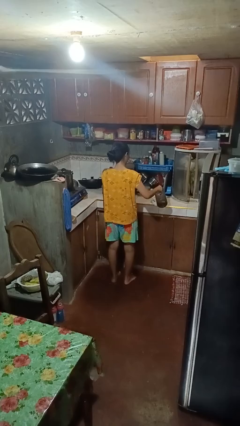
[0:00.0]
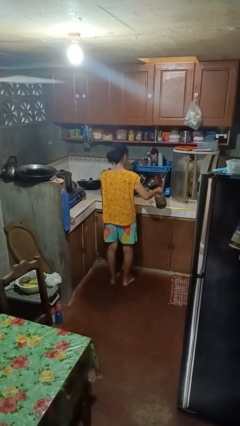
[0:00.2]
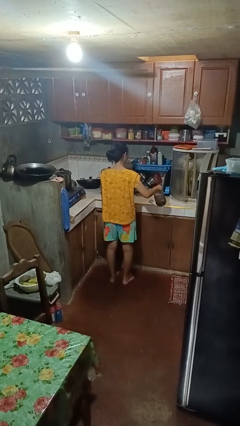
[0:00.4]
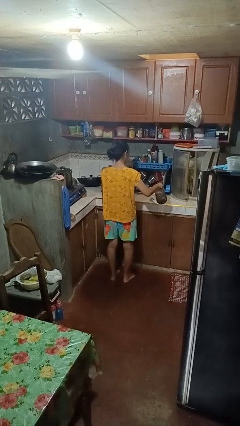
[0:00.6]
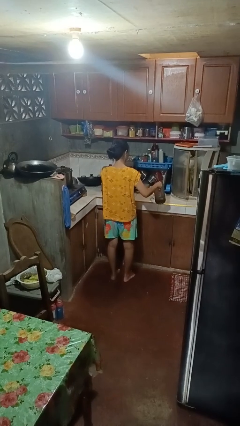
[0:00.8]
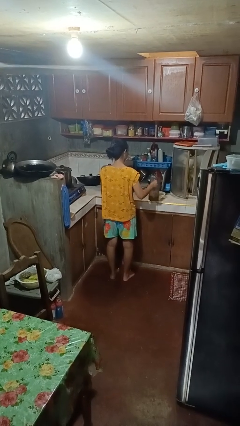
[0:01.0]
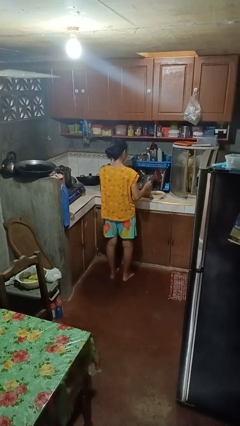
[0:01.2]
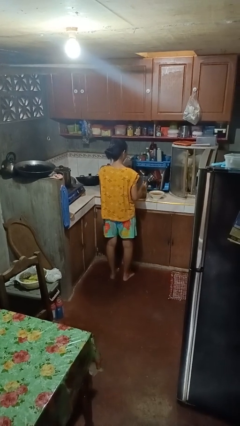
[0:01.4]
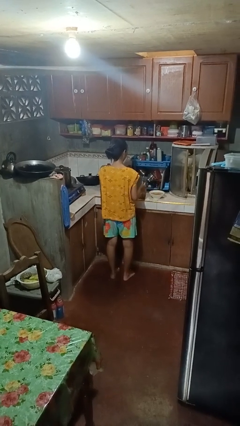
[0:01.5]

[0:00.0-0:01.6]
person pours into bowl

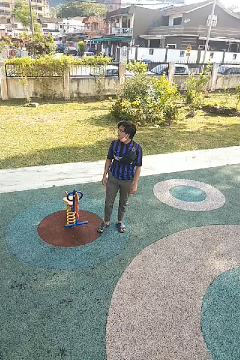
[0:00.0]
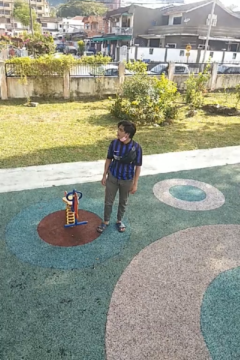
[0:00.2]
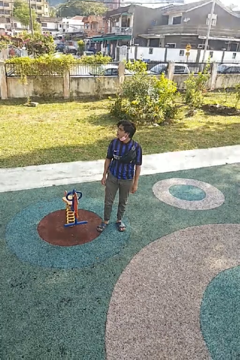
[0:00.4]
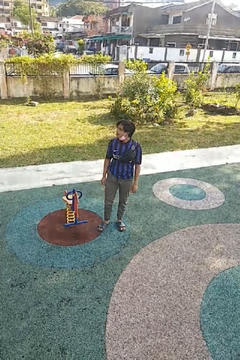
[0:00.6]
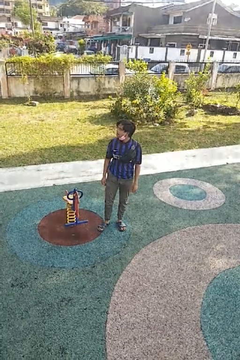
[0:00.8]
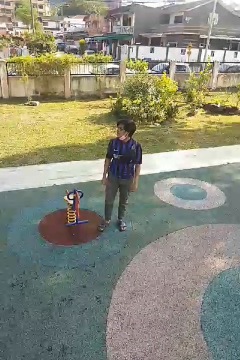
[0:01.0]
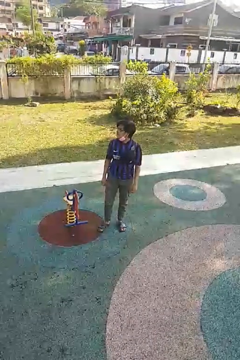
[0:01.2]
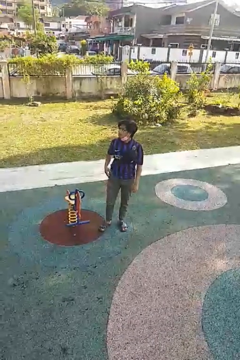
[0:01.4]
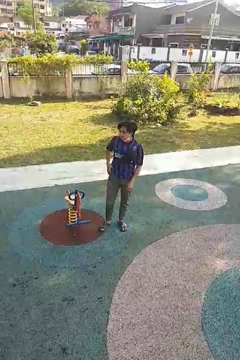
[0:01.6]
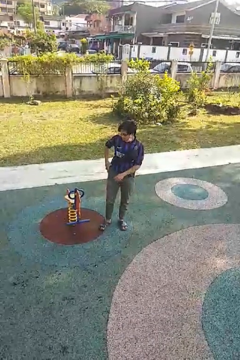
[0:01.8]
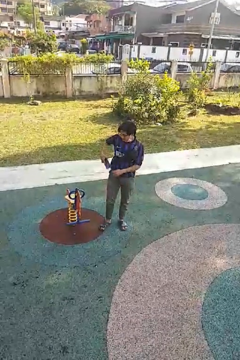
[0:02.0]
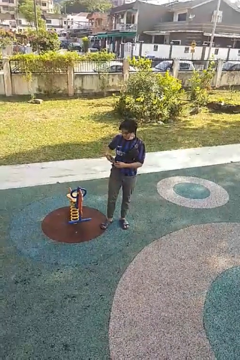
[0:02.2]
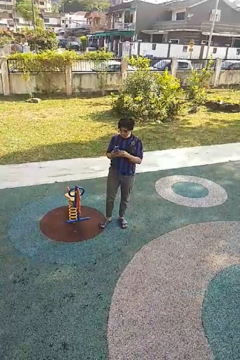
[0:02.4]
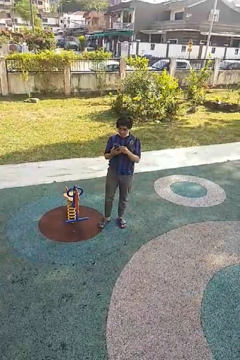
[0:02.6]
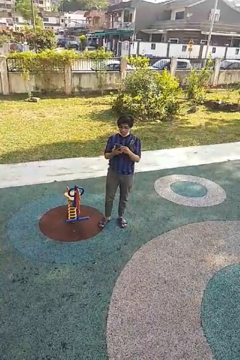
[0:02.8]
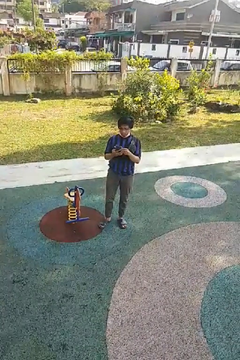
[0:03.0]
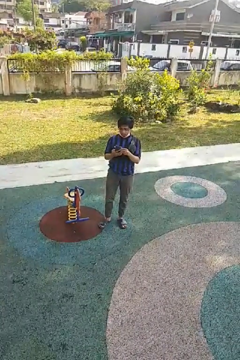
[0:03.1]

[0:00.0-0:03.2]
person takes phone from pocket

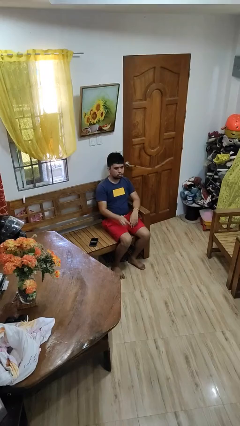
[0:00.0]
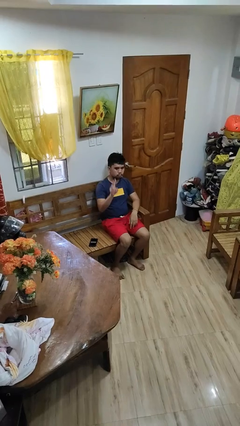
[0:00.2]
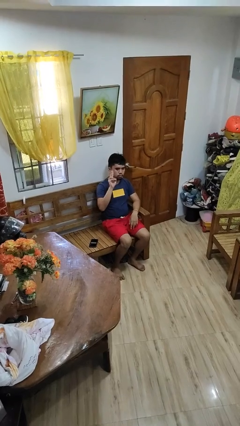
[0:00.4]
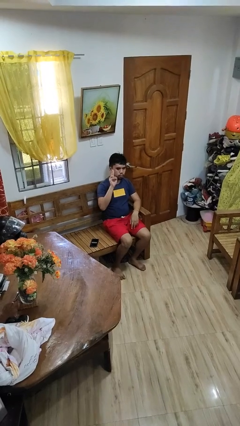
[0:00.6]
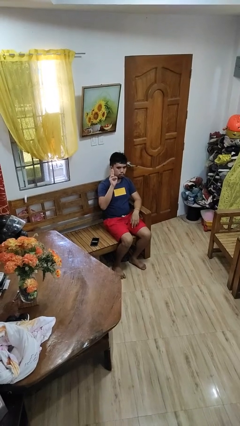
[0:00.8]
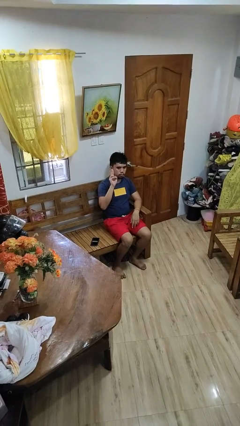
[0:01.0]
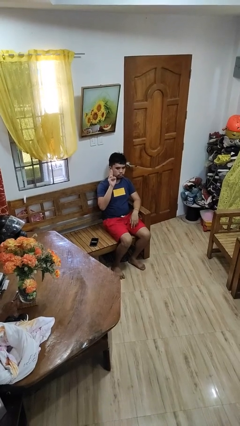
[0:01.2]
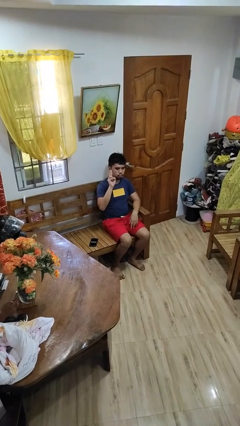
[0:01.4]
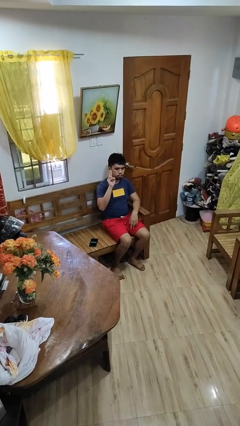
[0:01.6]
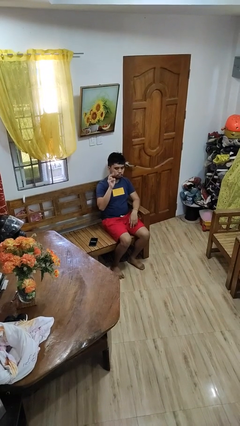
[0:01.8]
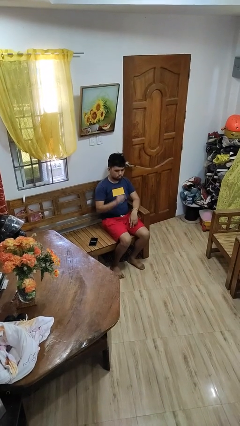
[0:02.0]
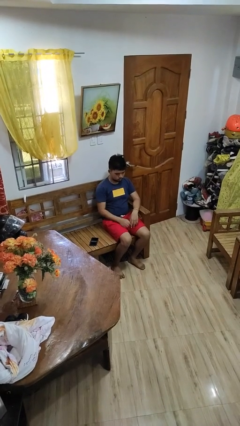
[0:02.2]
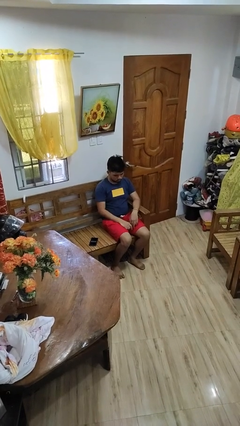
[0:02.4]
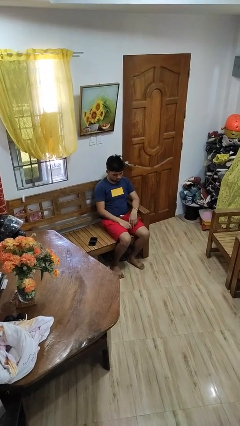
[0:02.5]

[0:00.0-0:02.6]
person gestures peace

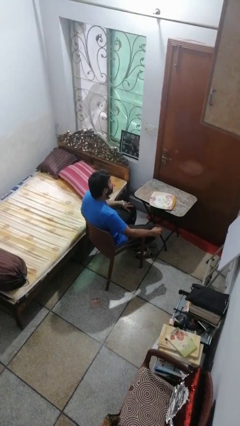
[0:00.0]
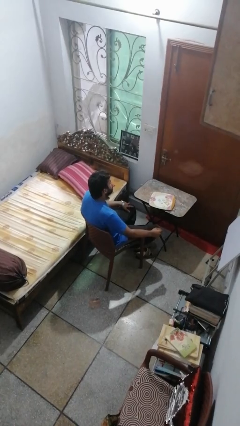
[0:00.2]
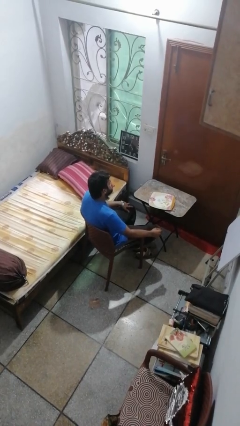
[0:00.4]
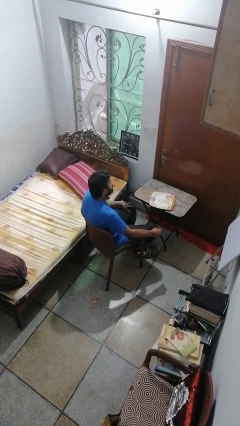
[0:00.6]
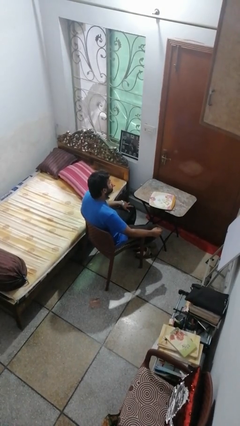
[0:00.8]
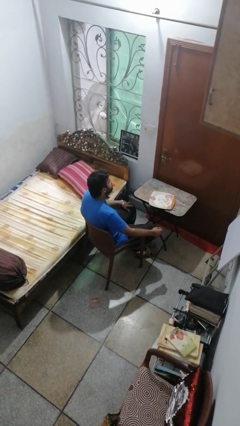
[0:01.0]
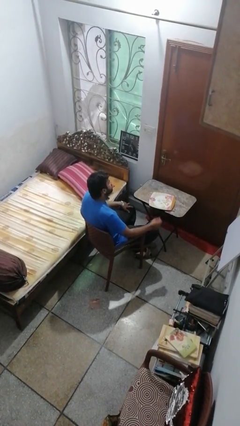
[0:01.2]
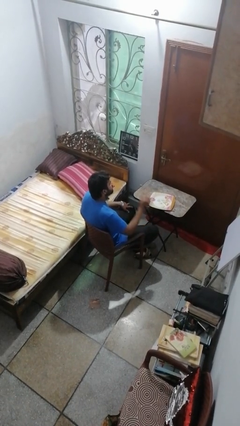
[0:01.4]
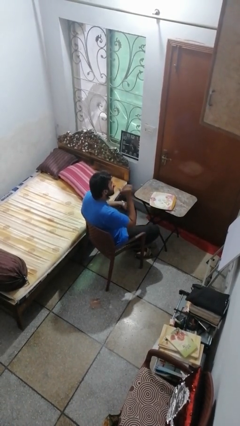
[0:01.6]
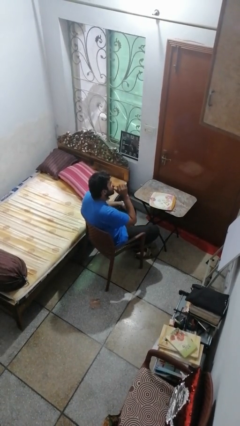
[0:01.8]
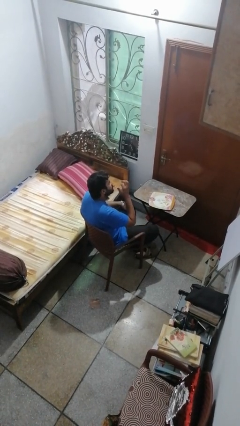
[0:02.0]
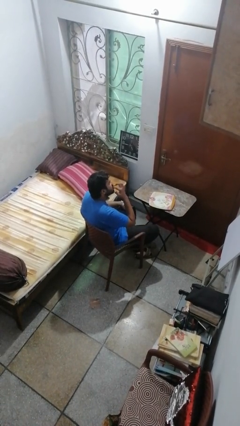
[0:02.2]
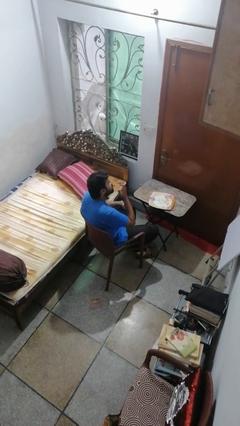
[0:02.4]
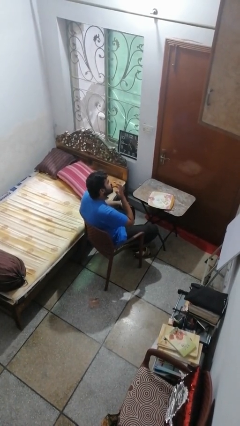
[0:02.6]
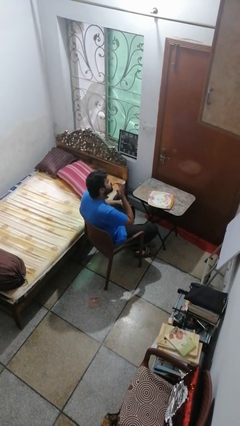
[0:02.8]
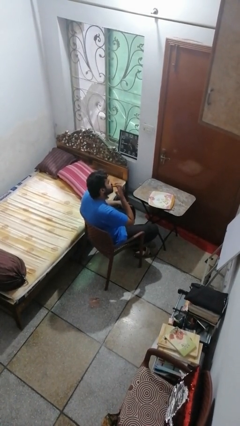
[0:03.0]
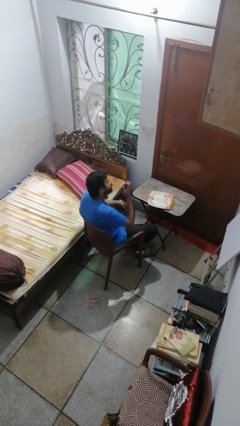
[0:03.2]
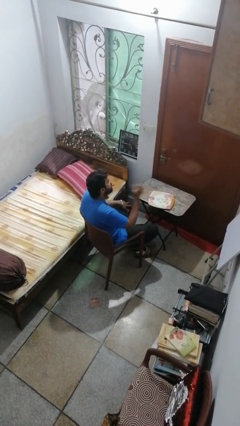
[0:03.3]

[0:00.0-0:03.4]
person licks fingers

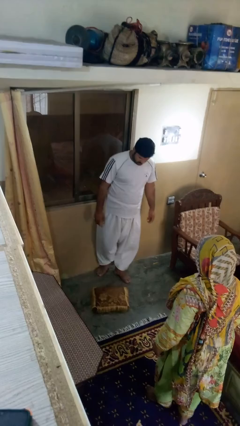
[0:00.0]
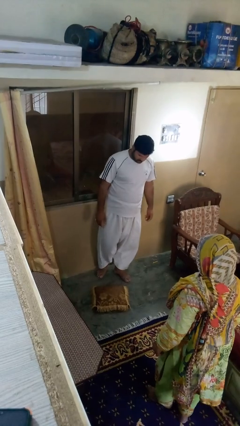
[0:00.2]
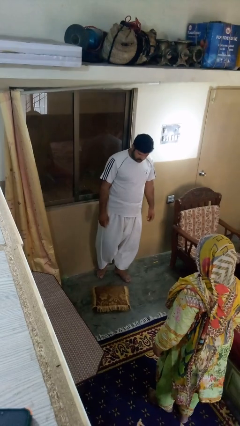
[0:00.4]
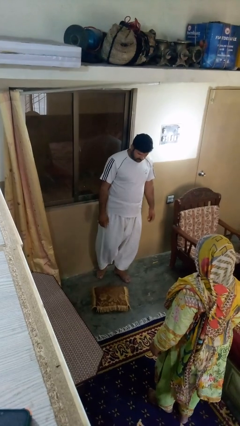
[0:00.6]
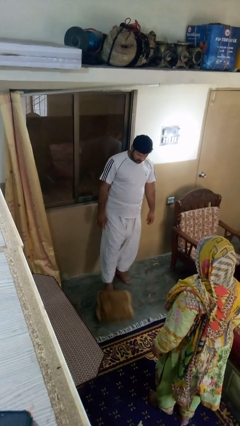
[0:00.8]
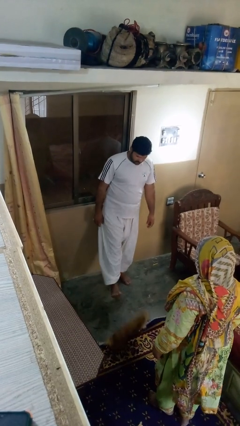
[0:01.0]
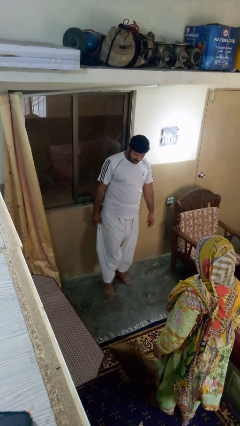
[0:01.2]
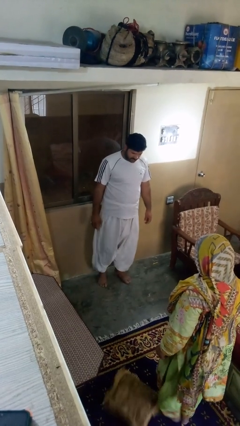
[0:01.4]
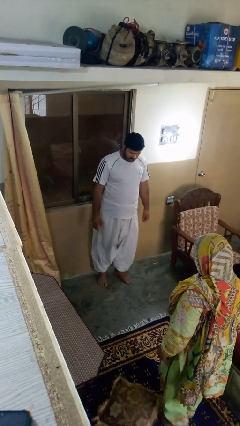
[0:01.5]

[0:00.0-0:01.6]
person kicks object to person

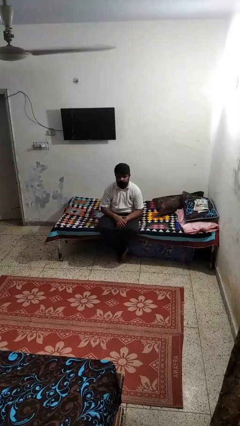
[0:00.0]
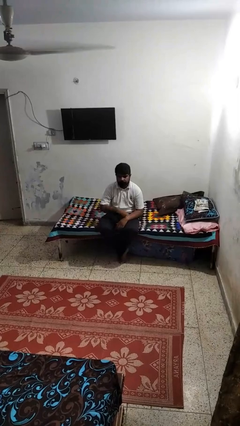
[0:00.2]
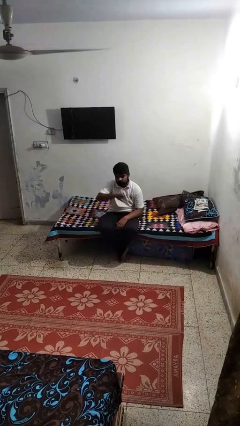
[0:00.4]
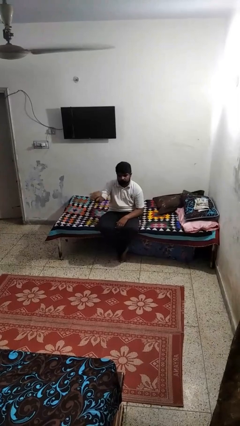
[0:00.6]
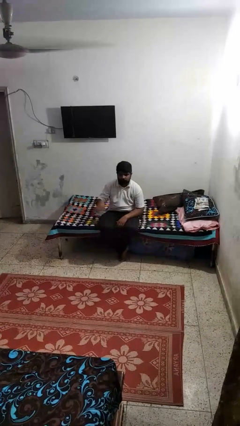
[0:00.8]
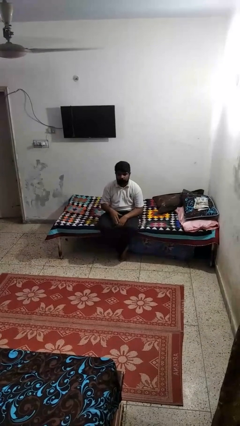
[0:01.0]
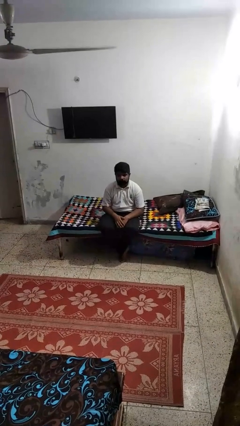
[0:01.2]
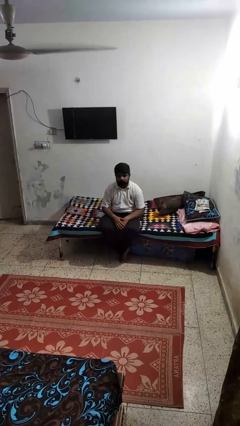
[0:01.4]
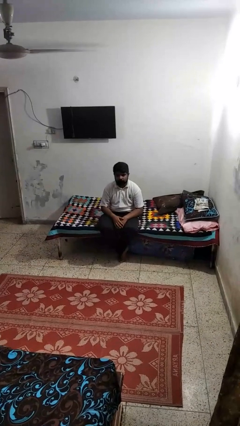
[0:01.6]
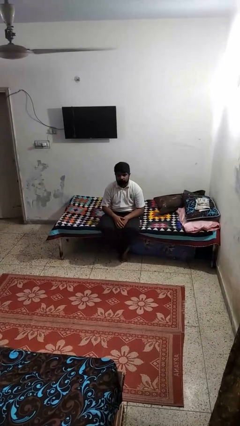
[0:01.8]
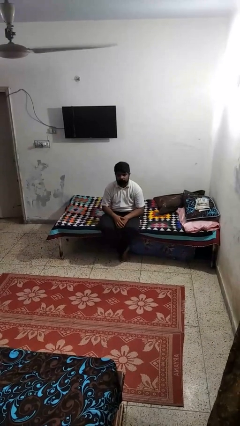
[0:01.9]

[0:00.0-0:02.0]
person gestures swipe right

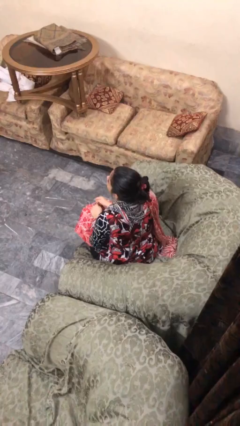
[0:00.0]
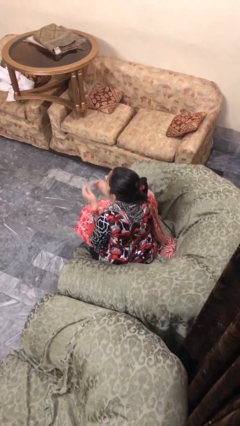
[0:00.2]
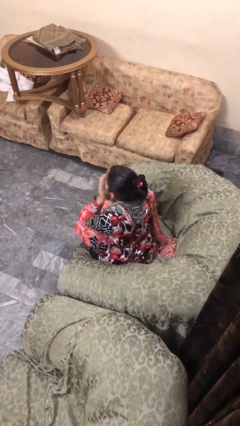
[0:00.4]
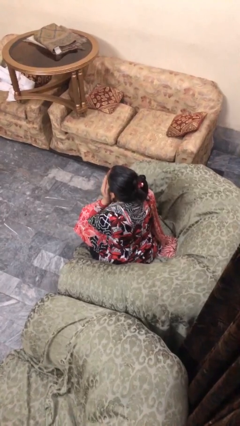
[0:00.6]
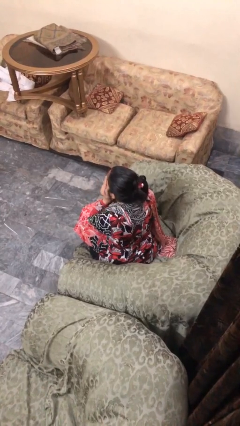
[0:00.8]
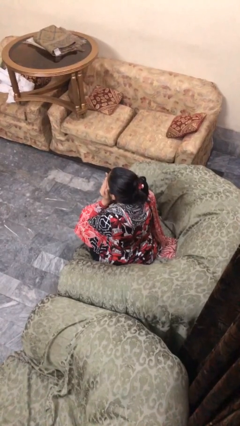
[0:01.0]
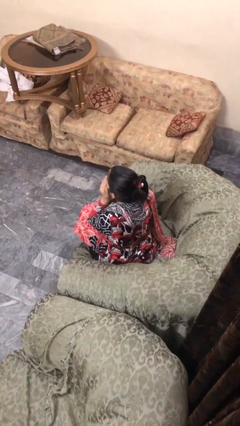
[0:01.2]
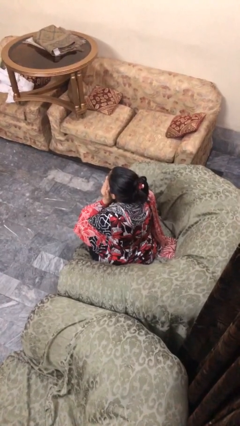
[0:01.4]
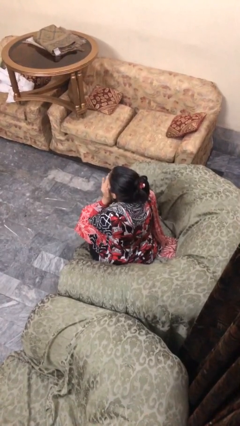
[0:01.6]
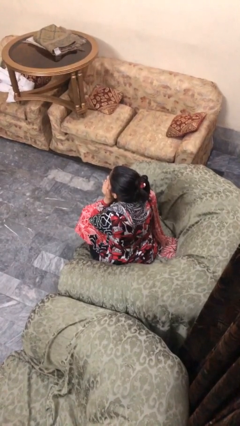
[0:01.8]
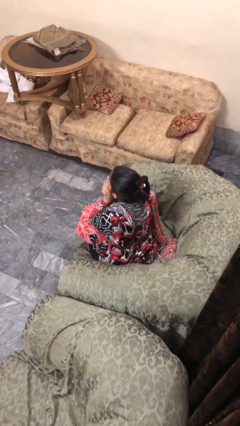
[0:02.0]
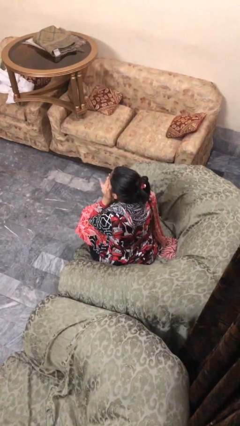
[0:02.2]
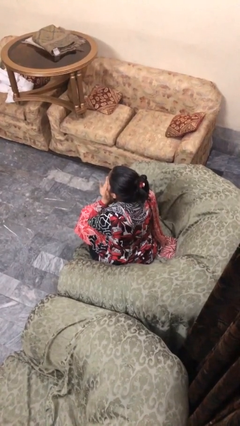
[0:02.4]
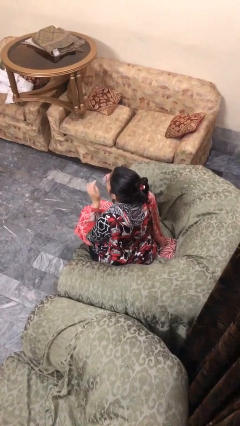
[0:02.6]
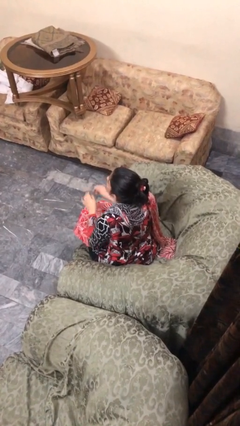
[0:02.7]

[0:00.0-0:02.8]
person rubs eyes

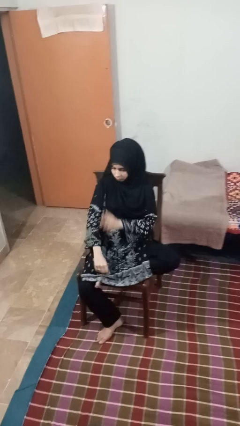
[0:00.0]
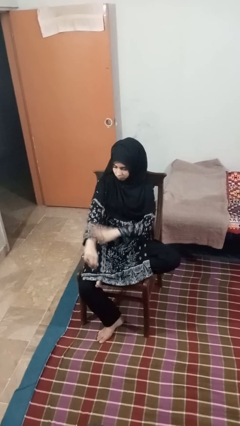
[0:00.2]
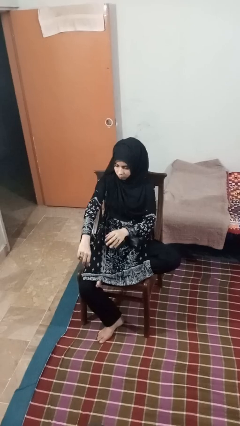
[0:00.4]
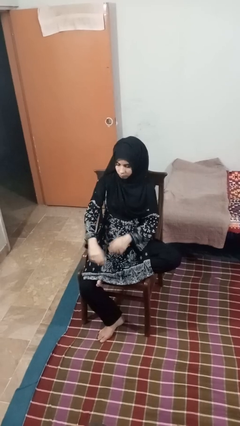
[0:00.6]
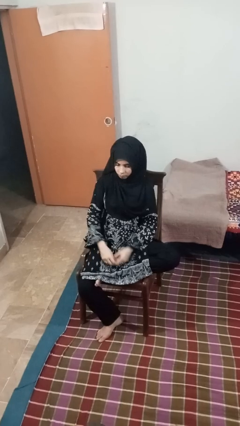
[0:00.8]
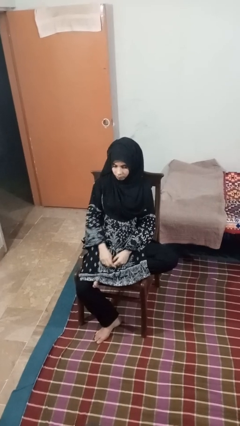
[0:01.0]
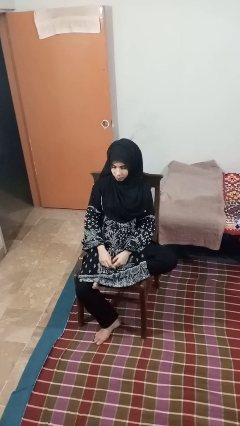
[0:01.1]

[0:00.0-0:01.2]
person swats bug
